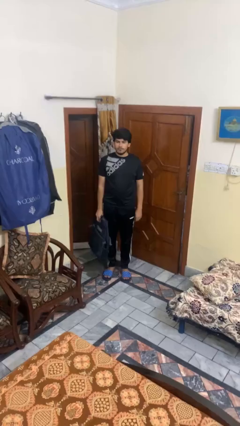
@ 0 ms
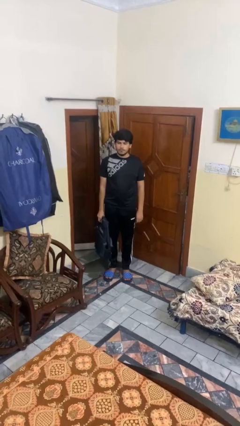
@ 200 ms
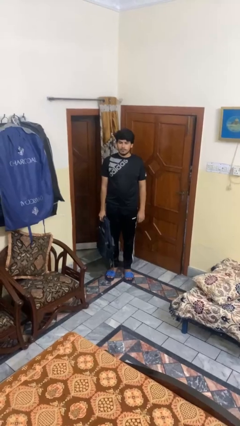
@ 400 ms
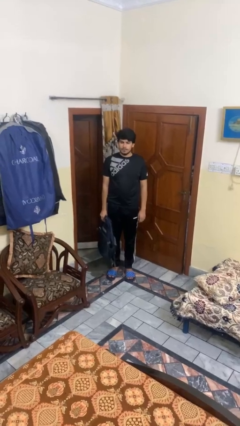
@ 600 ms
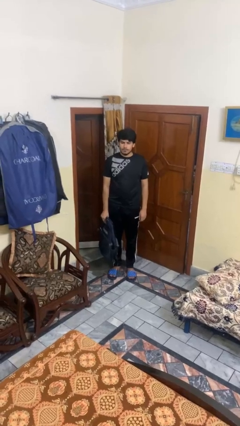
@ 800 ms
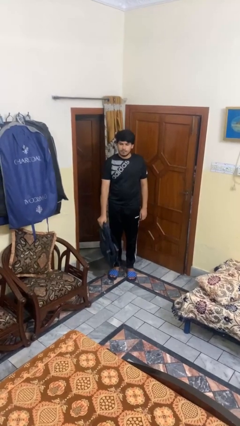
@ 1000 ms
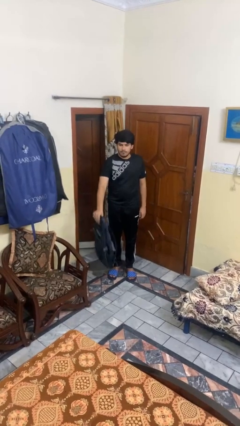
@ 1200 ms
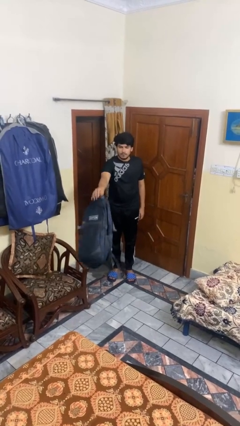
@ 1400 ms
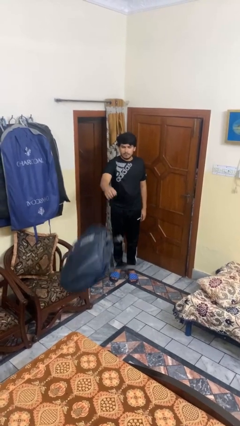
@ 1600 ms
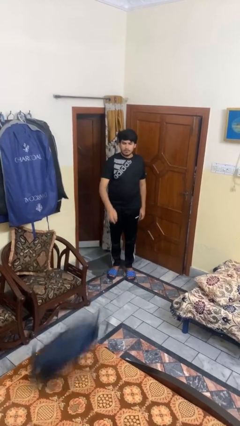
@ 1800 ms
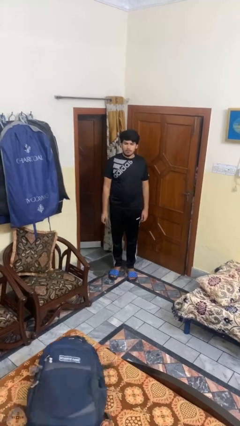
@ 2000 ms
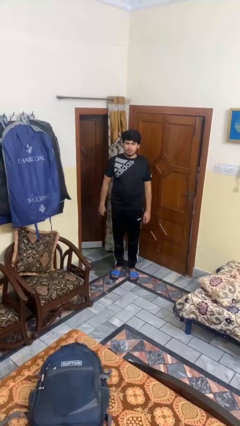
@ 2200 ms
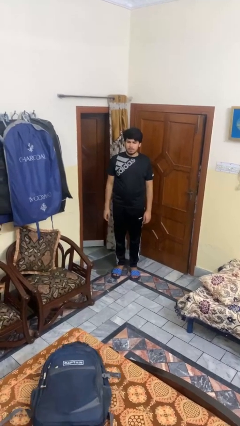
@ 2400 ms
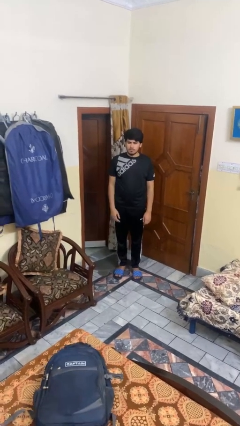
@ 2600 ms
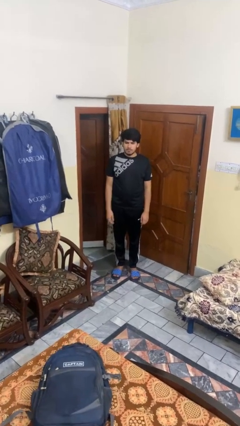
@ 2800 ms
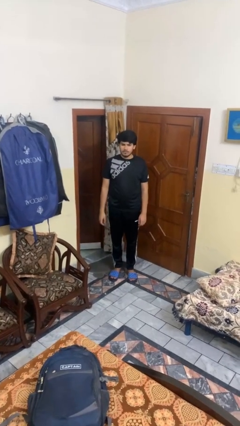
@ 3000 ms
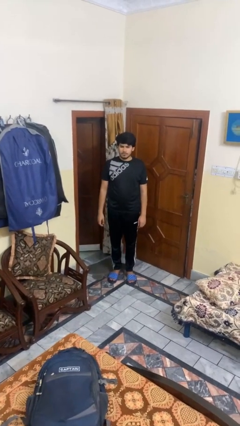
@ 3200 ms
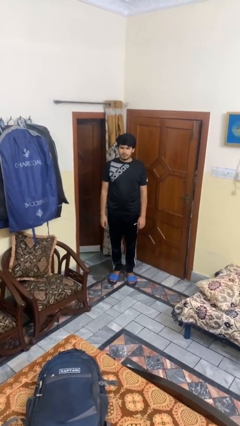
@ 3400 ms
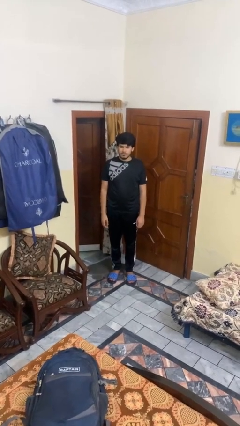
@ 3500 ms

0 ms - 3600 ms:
person throws object on bed

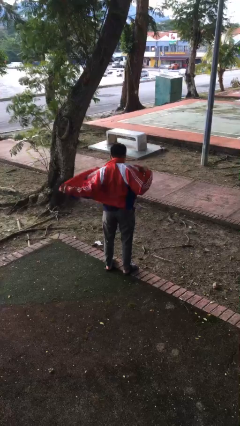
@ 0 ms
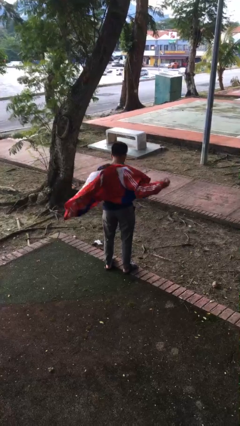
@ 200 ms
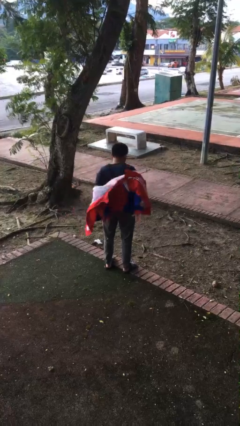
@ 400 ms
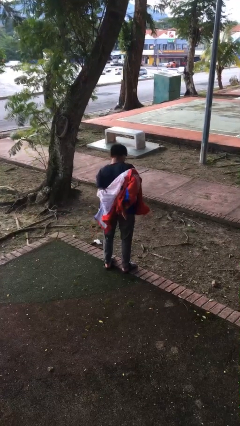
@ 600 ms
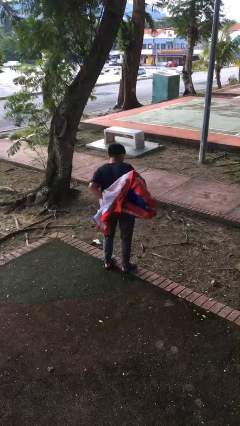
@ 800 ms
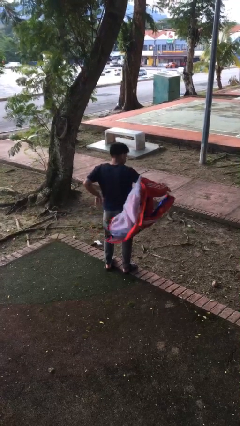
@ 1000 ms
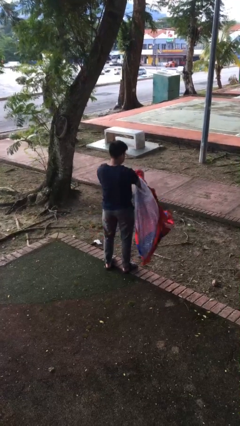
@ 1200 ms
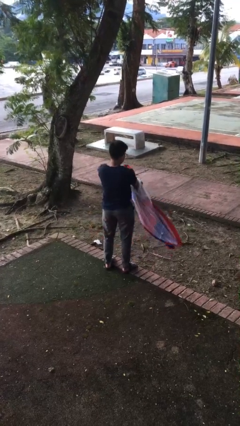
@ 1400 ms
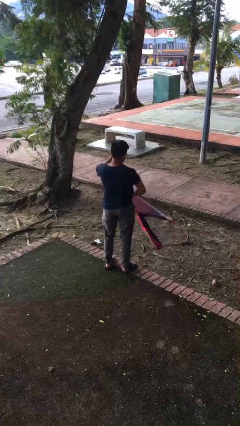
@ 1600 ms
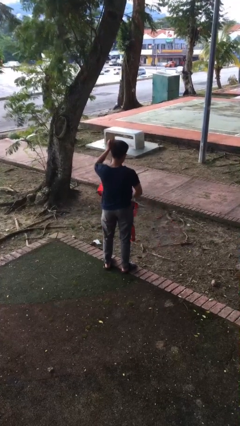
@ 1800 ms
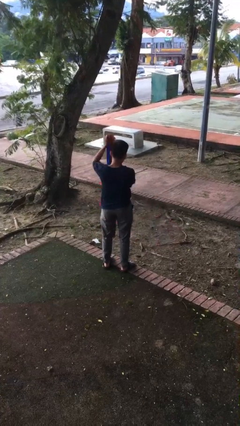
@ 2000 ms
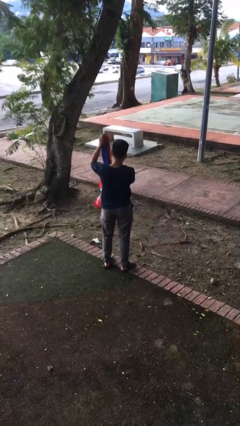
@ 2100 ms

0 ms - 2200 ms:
person takes off jacket

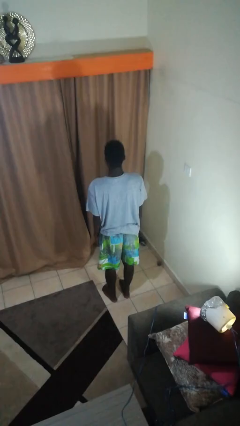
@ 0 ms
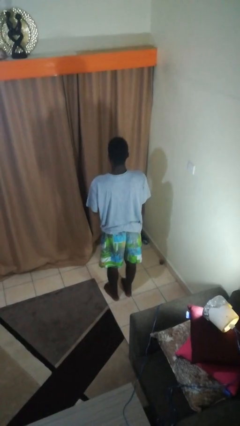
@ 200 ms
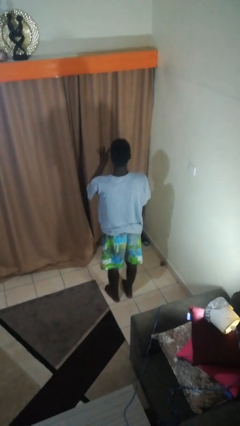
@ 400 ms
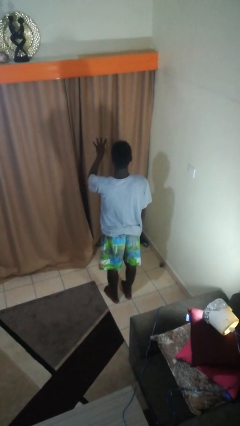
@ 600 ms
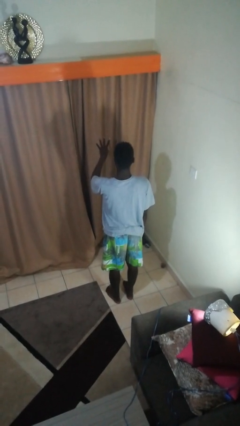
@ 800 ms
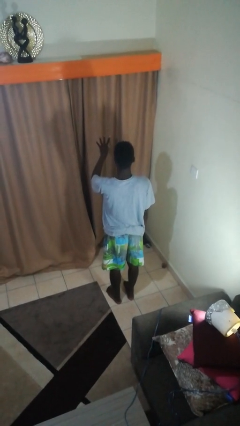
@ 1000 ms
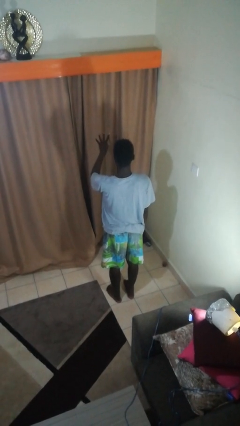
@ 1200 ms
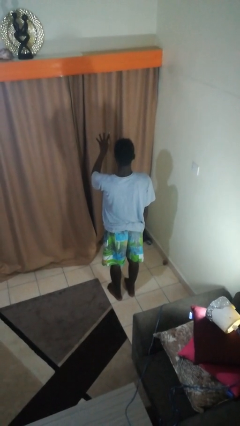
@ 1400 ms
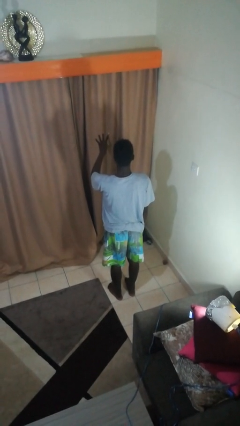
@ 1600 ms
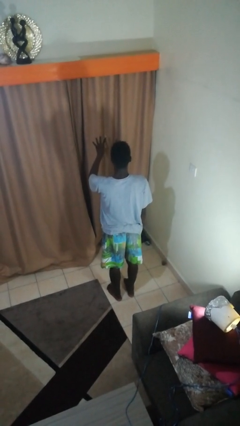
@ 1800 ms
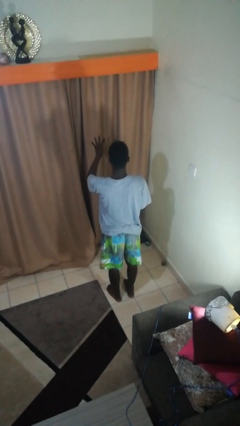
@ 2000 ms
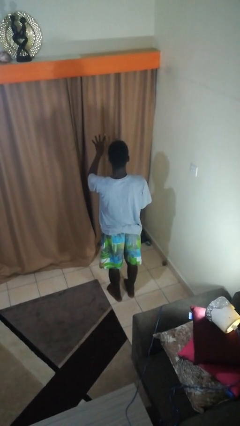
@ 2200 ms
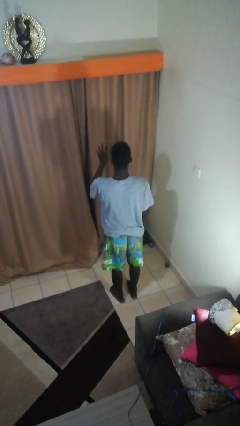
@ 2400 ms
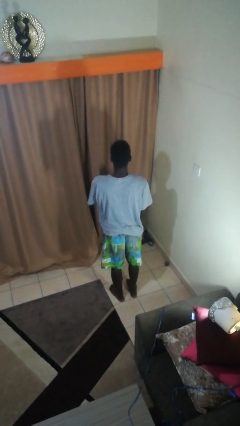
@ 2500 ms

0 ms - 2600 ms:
person gestures number four

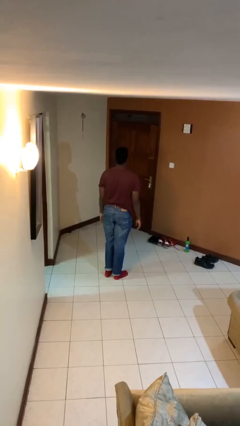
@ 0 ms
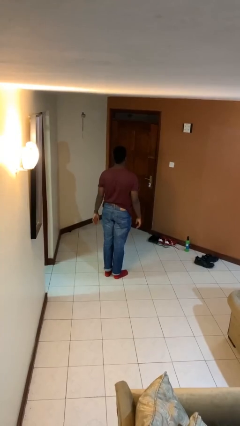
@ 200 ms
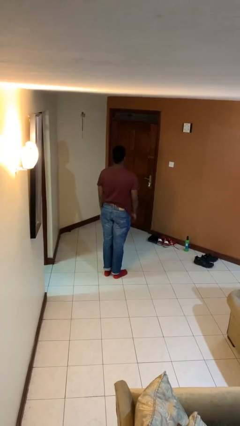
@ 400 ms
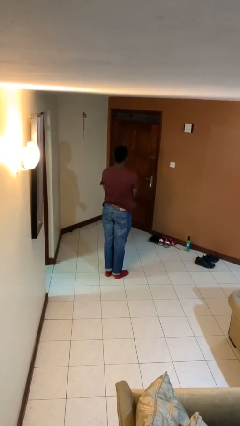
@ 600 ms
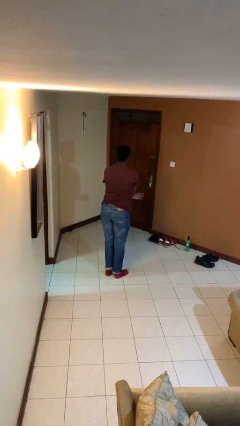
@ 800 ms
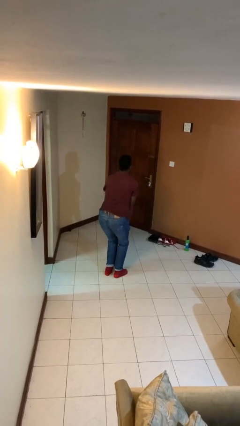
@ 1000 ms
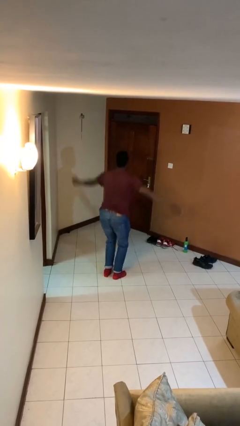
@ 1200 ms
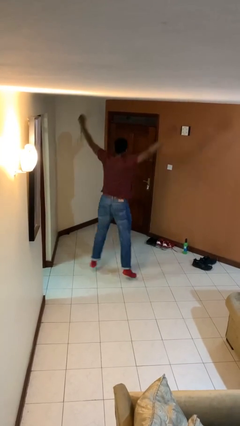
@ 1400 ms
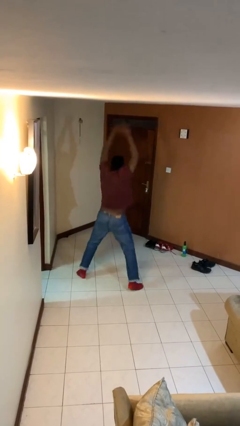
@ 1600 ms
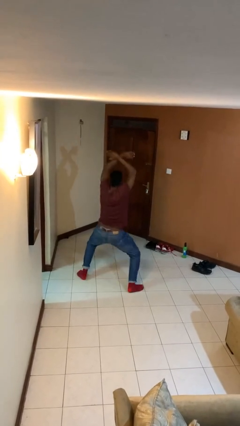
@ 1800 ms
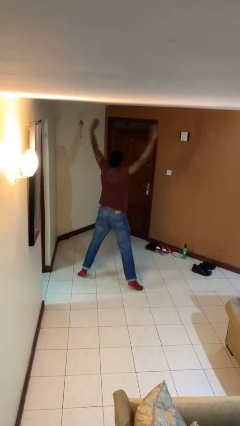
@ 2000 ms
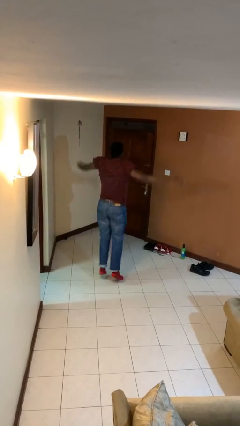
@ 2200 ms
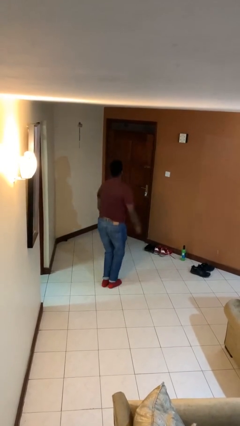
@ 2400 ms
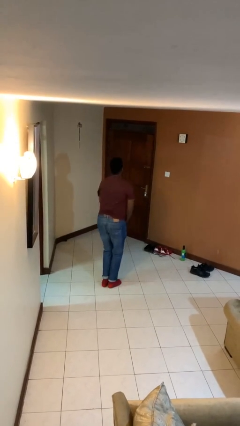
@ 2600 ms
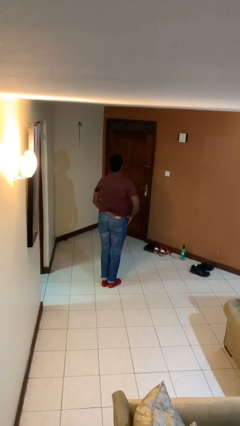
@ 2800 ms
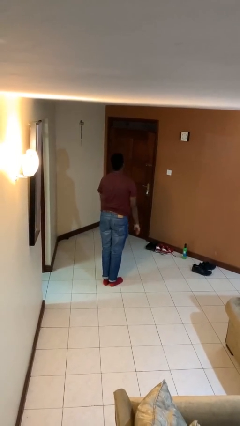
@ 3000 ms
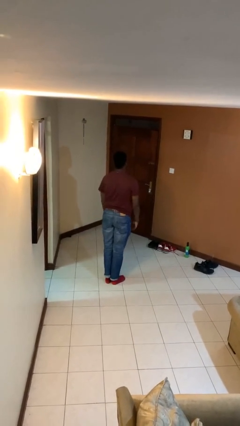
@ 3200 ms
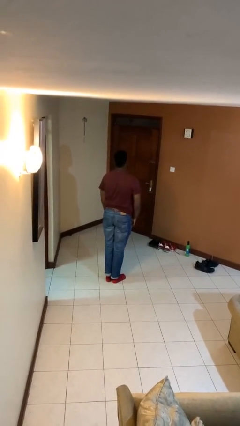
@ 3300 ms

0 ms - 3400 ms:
person exercises with jumping jacks

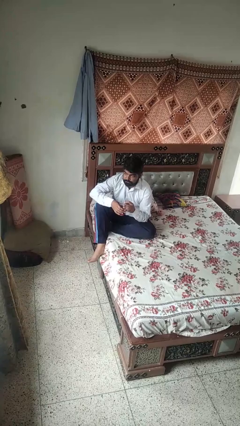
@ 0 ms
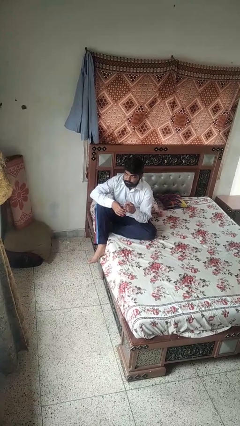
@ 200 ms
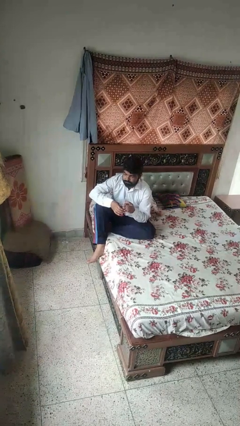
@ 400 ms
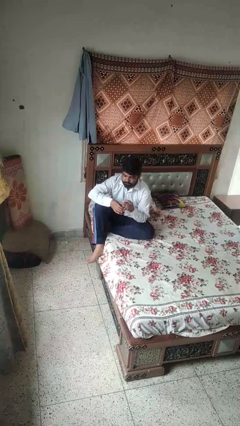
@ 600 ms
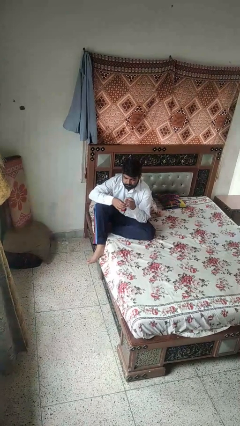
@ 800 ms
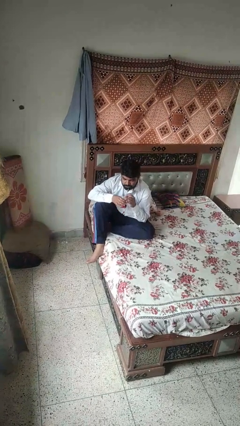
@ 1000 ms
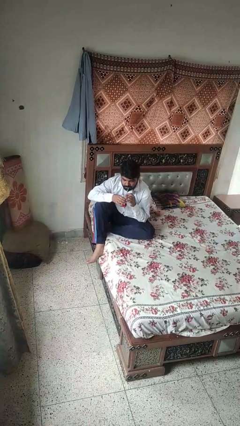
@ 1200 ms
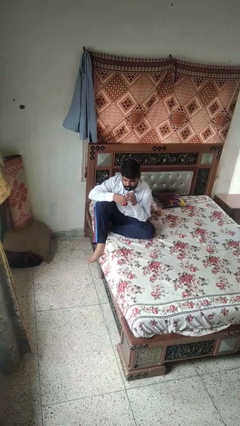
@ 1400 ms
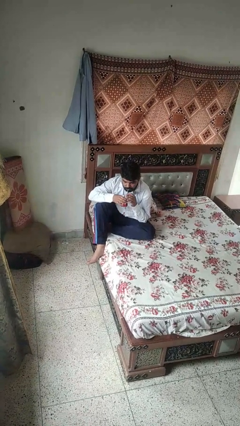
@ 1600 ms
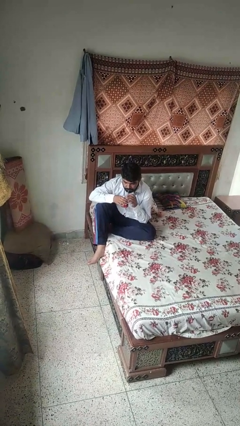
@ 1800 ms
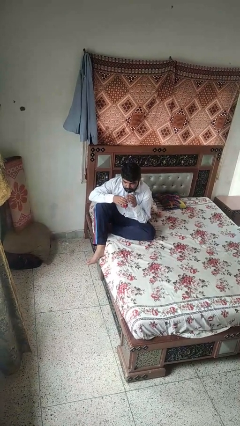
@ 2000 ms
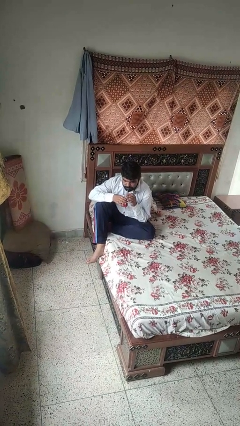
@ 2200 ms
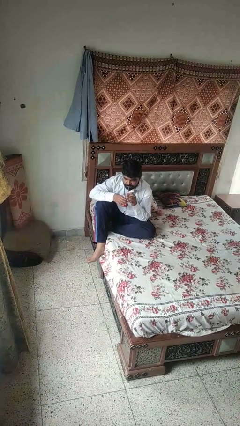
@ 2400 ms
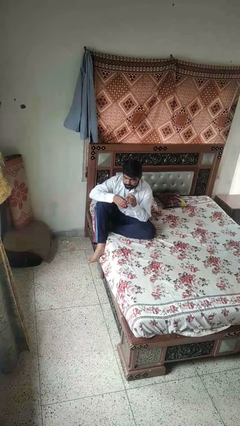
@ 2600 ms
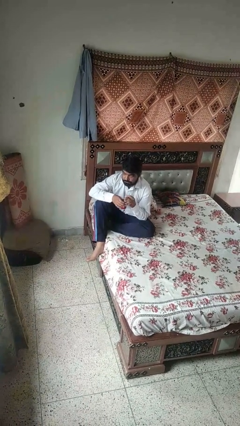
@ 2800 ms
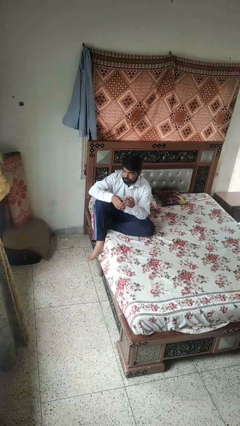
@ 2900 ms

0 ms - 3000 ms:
person drinks from straw

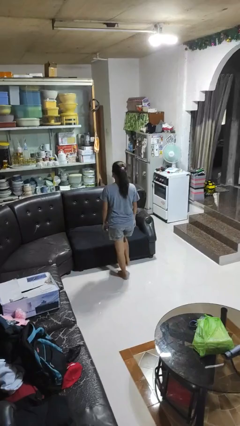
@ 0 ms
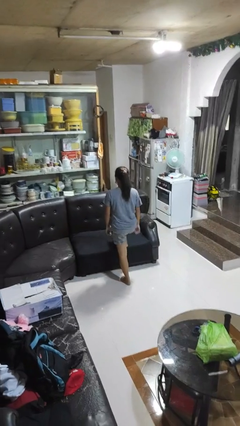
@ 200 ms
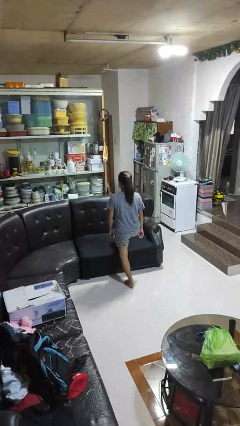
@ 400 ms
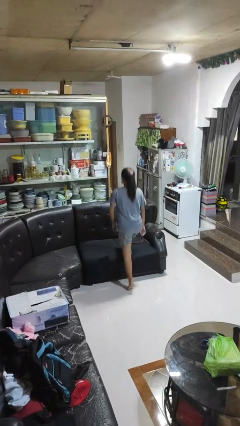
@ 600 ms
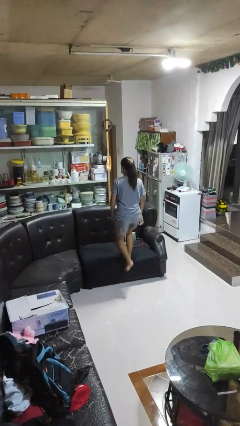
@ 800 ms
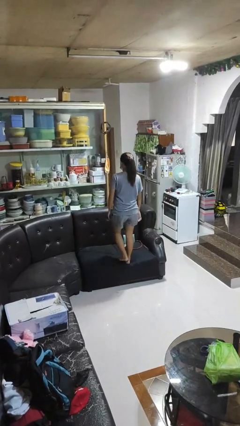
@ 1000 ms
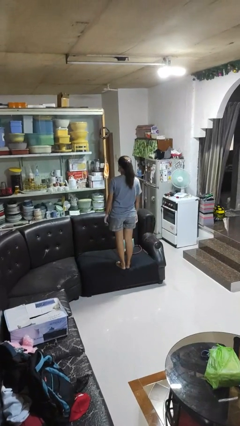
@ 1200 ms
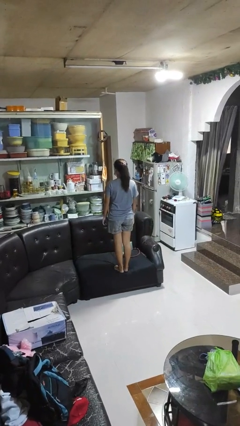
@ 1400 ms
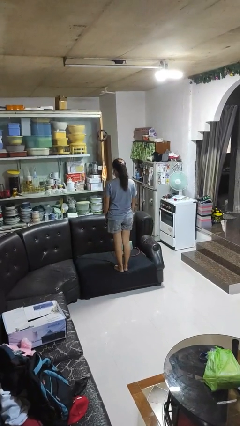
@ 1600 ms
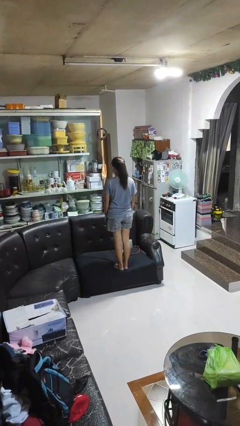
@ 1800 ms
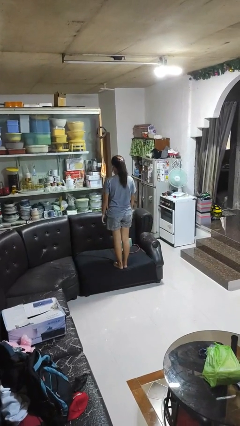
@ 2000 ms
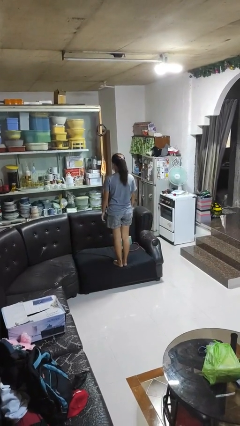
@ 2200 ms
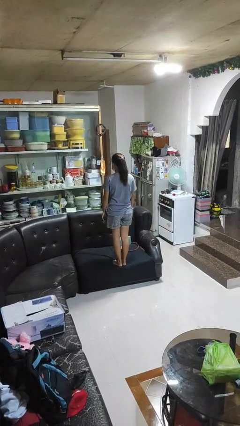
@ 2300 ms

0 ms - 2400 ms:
person climbs on couch
